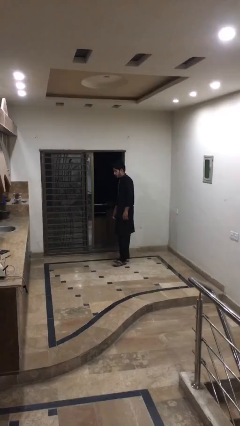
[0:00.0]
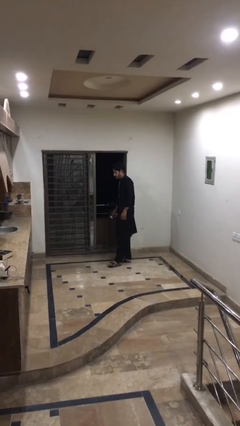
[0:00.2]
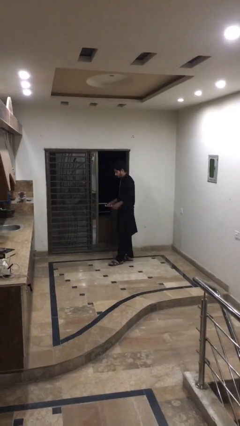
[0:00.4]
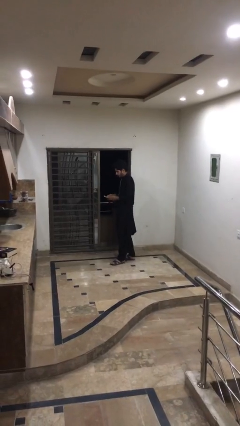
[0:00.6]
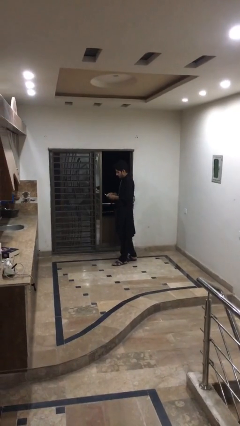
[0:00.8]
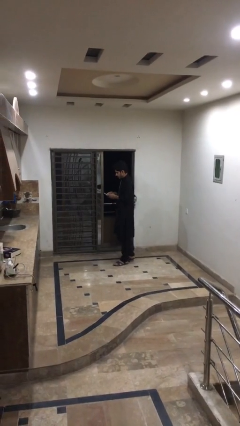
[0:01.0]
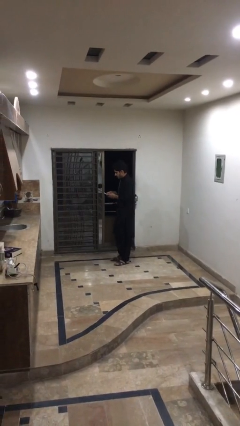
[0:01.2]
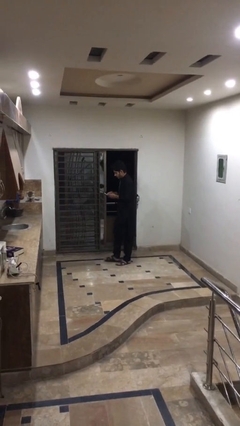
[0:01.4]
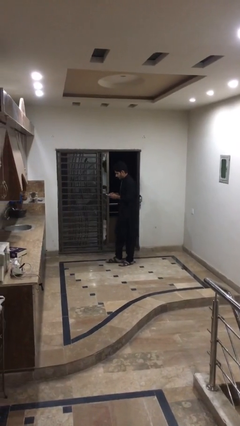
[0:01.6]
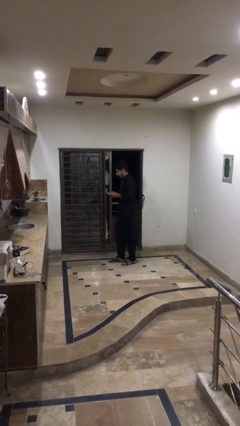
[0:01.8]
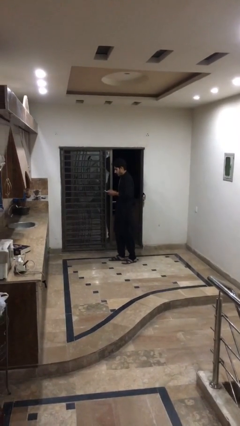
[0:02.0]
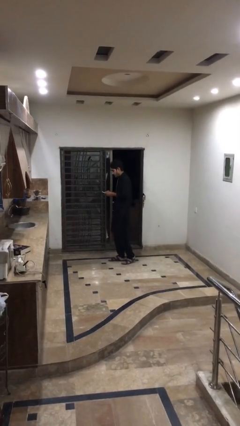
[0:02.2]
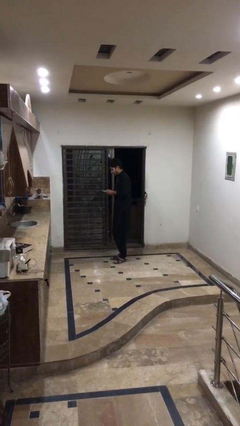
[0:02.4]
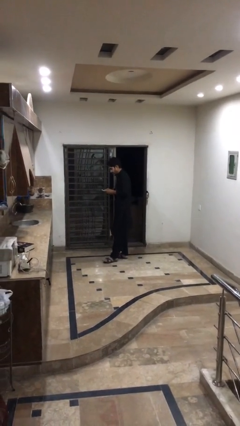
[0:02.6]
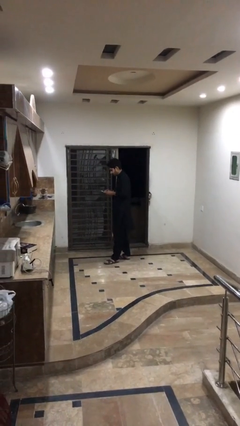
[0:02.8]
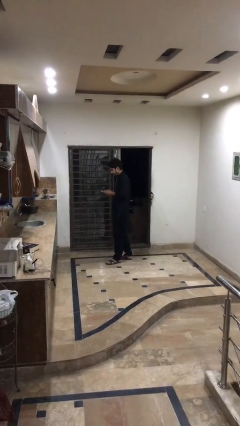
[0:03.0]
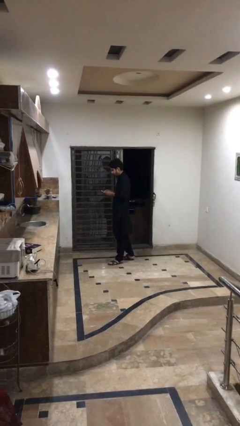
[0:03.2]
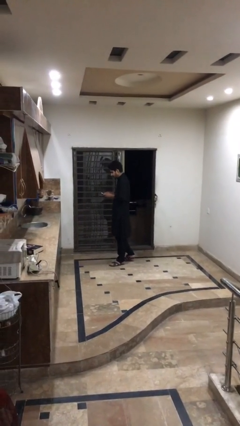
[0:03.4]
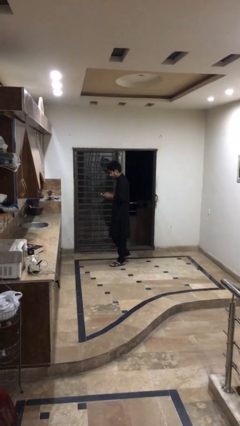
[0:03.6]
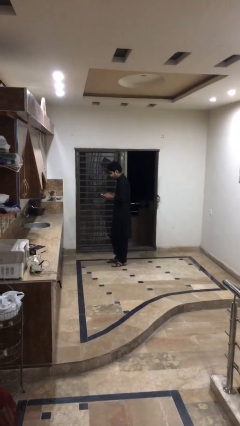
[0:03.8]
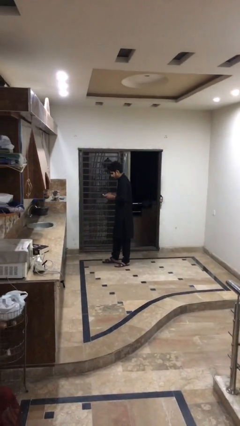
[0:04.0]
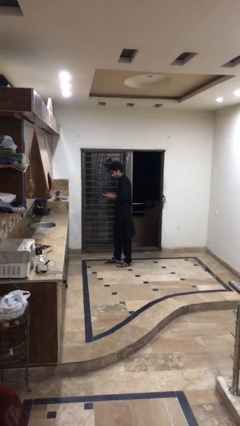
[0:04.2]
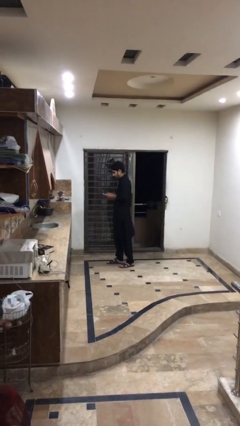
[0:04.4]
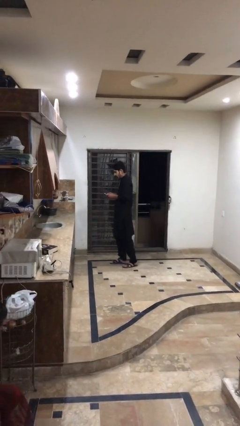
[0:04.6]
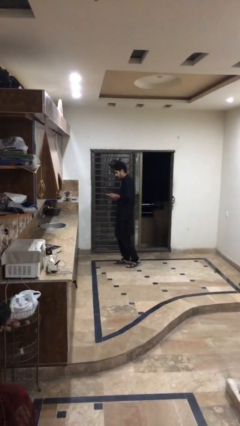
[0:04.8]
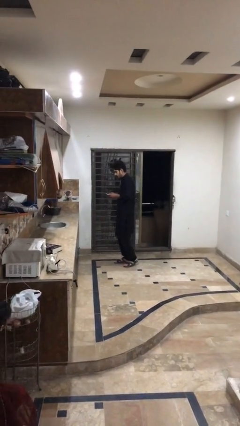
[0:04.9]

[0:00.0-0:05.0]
person texts on phone

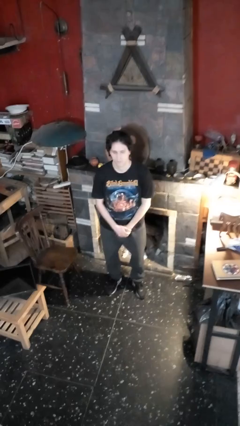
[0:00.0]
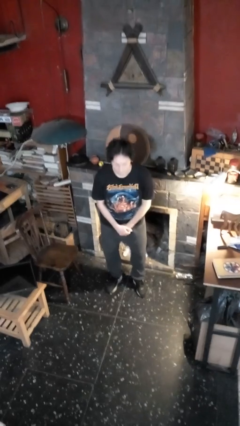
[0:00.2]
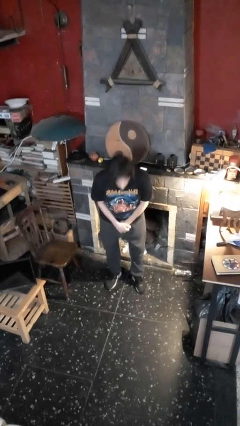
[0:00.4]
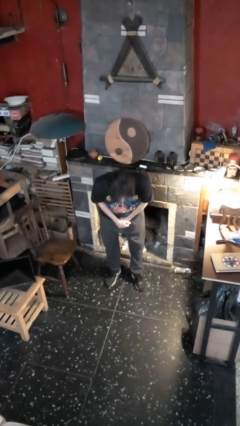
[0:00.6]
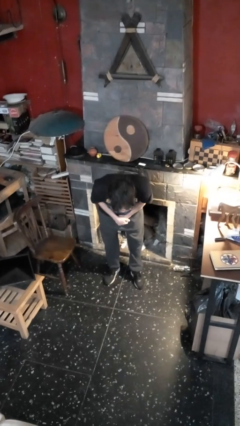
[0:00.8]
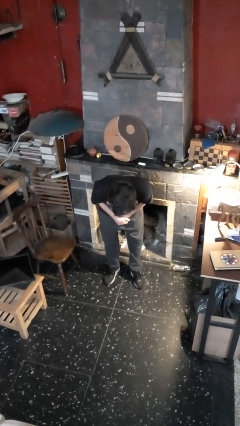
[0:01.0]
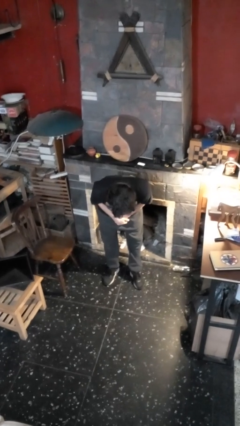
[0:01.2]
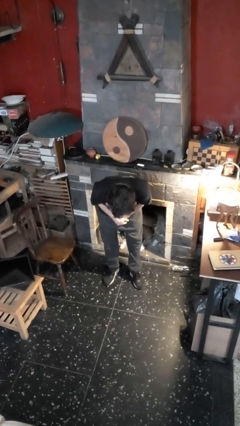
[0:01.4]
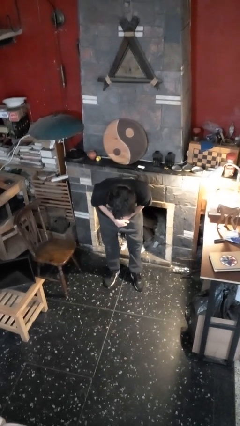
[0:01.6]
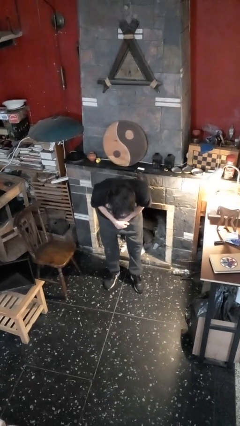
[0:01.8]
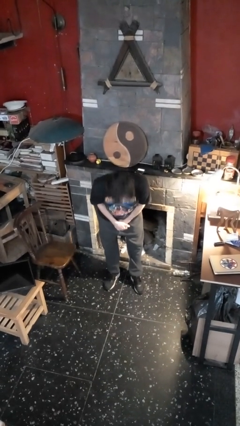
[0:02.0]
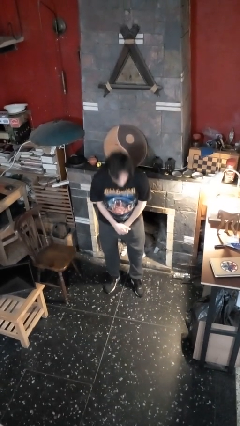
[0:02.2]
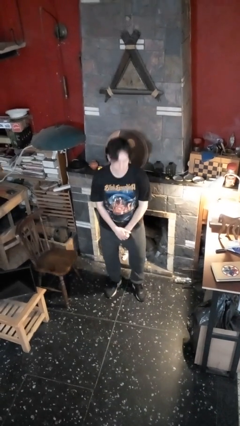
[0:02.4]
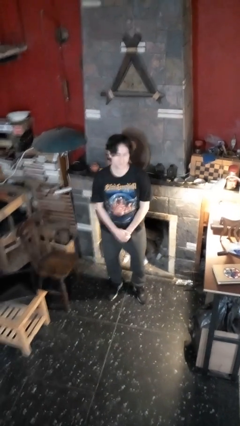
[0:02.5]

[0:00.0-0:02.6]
person bows

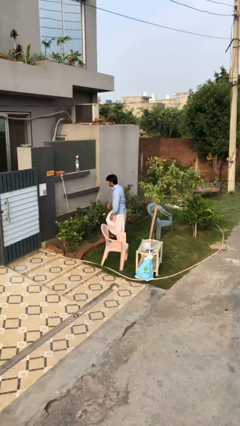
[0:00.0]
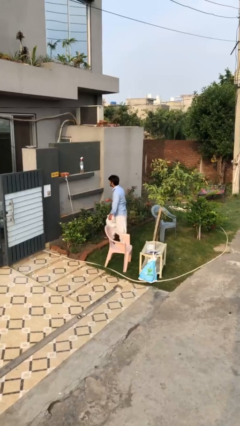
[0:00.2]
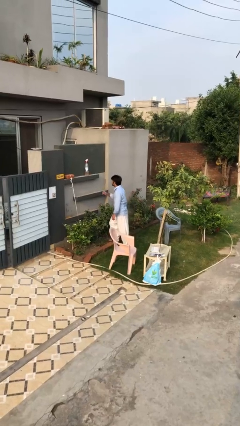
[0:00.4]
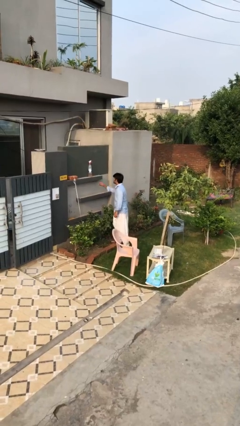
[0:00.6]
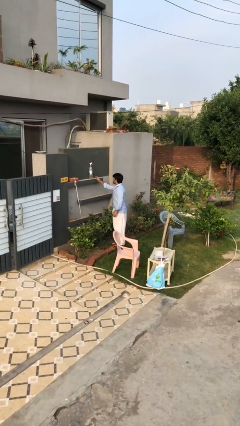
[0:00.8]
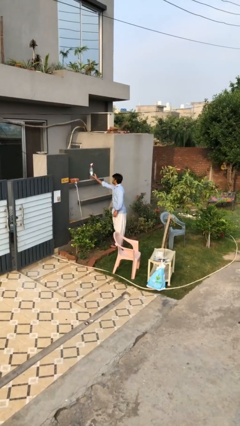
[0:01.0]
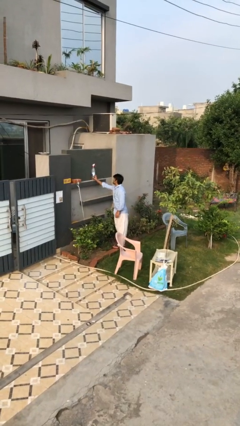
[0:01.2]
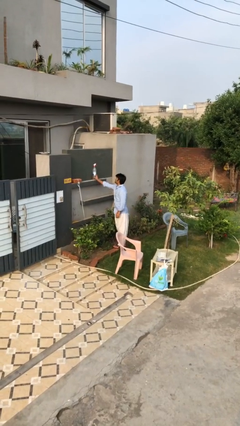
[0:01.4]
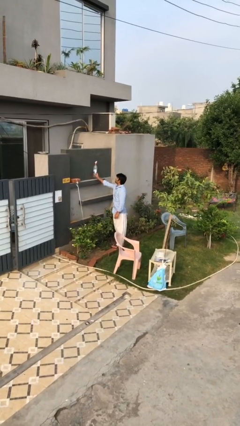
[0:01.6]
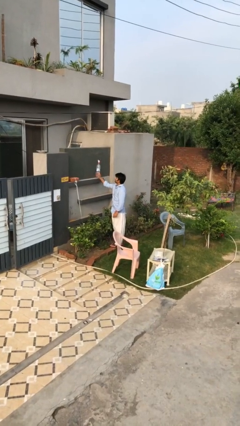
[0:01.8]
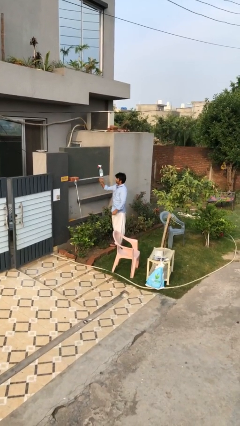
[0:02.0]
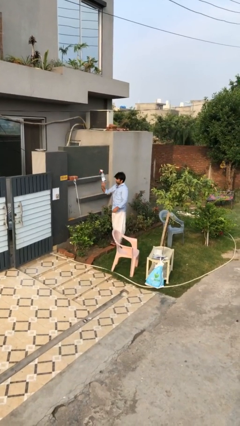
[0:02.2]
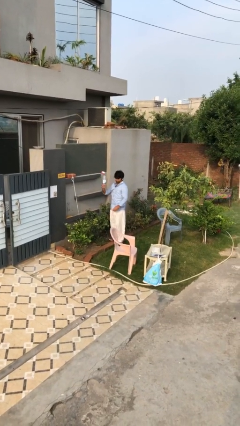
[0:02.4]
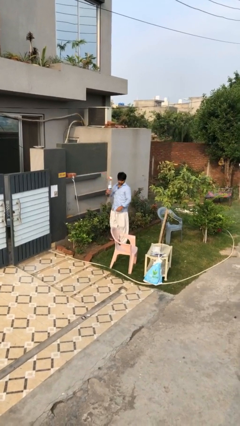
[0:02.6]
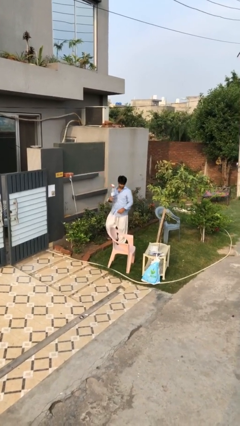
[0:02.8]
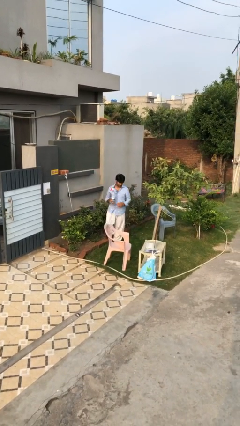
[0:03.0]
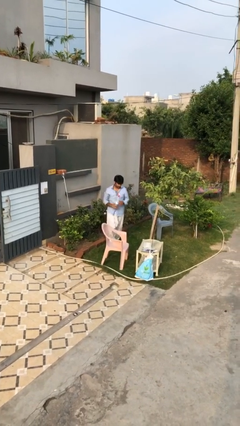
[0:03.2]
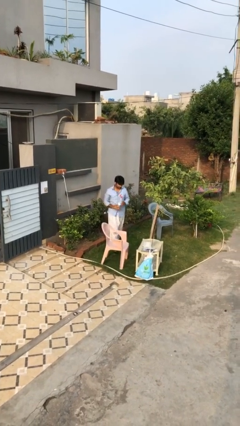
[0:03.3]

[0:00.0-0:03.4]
person picks up object from shelf

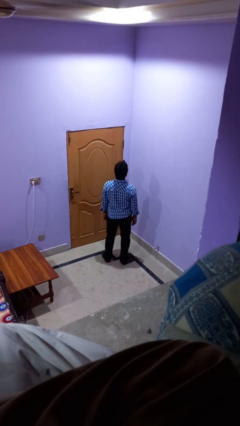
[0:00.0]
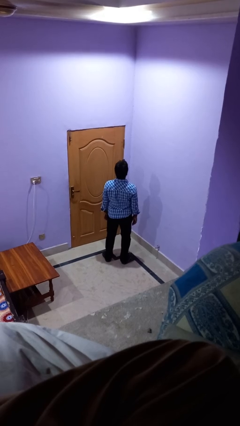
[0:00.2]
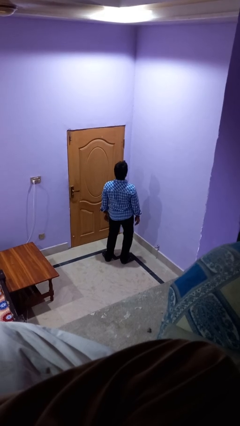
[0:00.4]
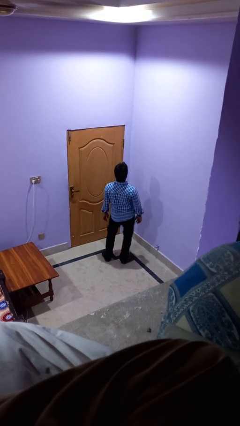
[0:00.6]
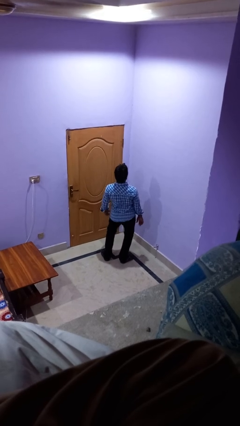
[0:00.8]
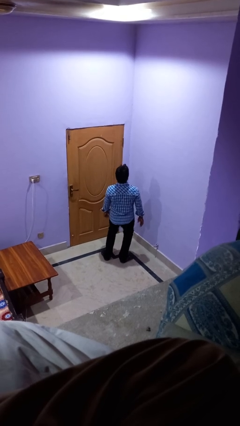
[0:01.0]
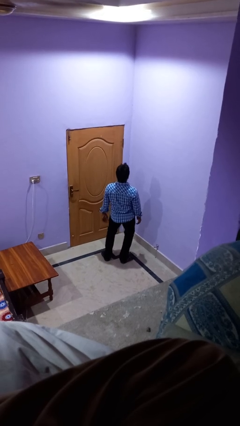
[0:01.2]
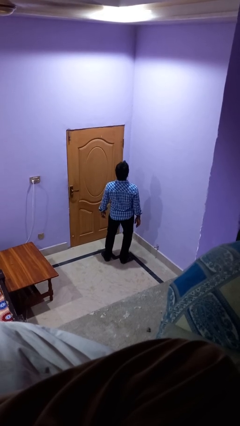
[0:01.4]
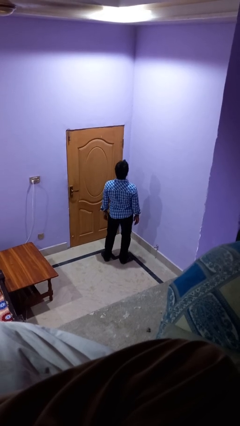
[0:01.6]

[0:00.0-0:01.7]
person wiggles hips

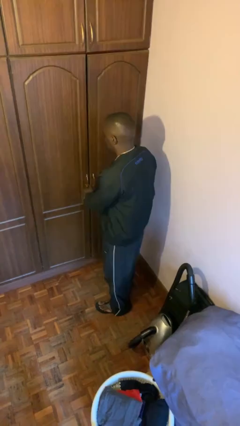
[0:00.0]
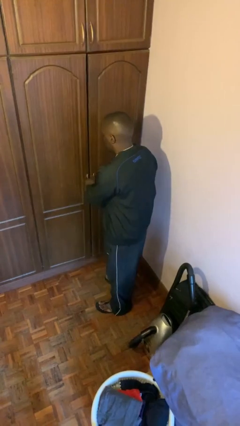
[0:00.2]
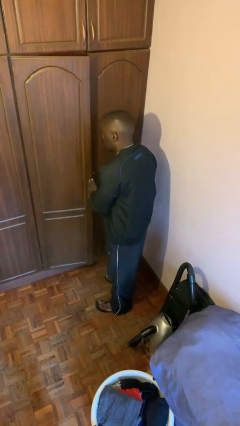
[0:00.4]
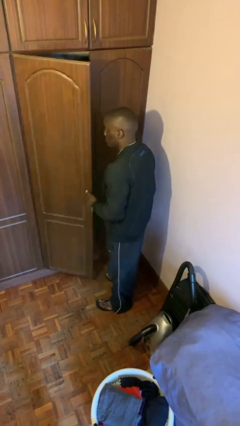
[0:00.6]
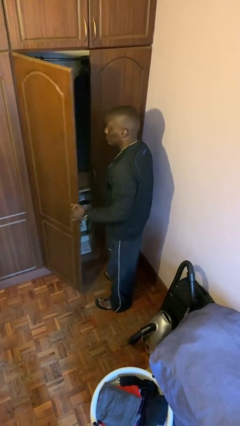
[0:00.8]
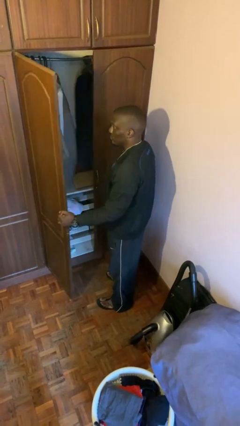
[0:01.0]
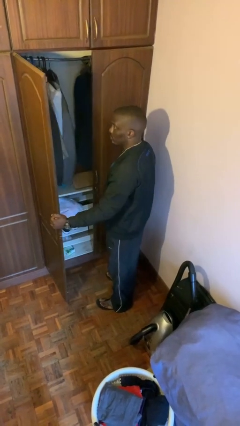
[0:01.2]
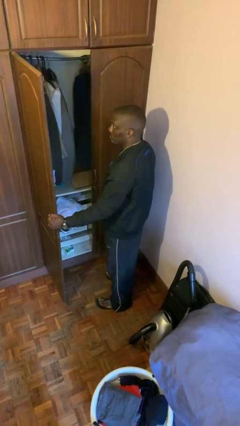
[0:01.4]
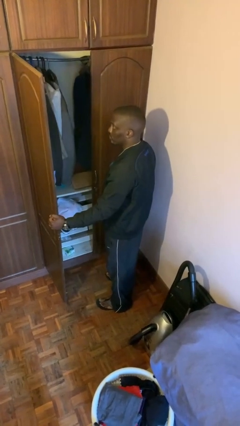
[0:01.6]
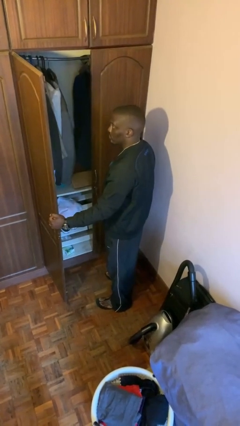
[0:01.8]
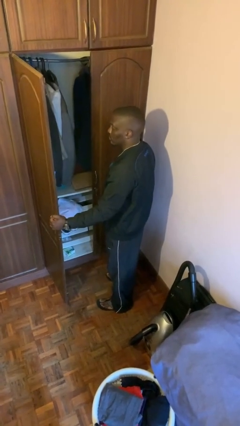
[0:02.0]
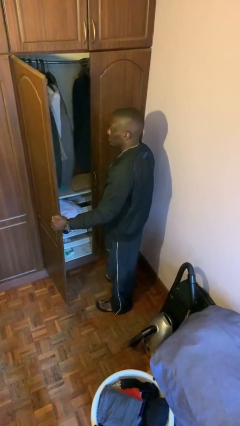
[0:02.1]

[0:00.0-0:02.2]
person opens closet door

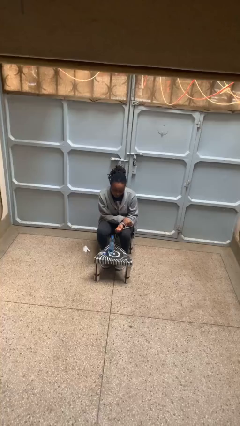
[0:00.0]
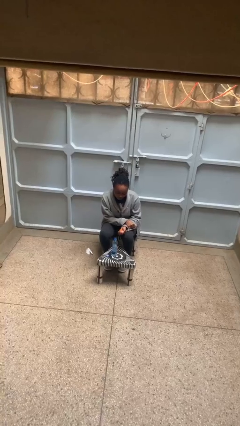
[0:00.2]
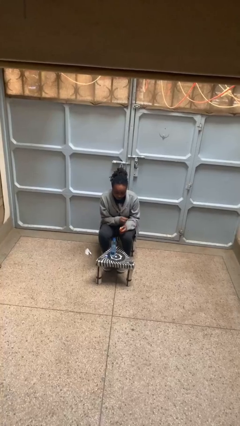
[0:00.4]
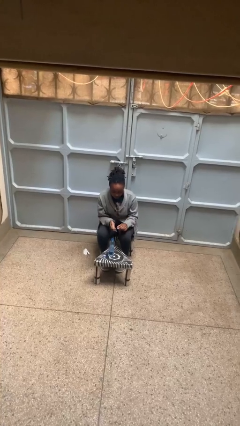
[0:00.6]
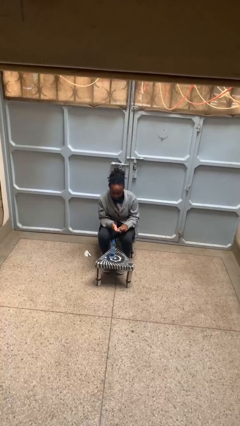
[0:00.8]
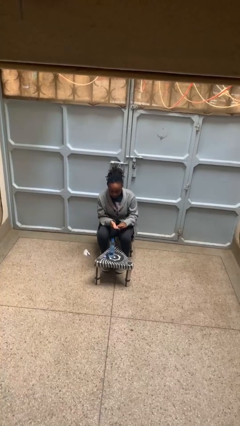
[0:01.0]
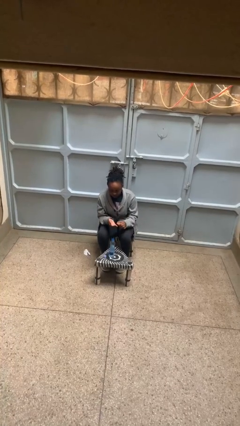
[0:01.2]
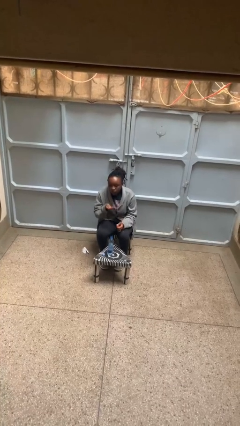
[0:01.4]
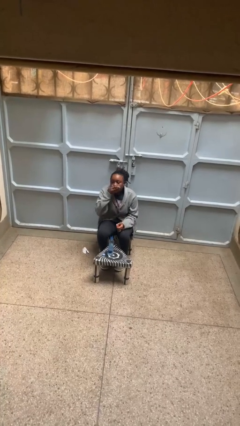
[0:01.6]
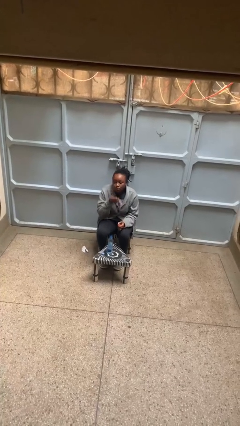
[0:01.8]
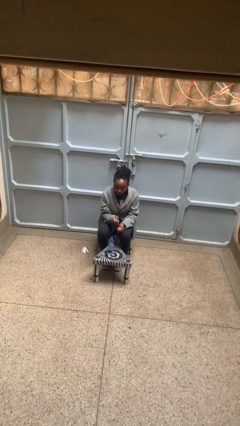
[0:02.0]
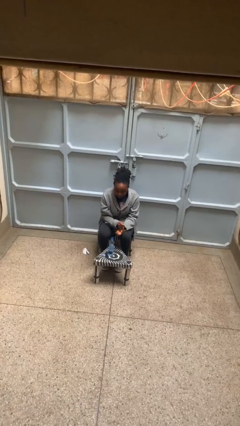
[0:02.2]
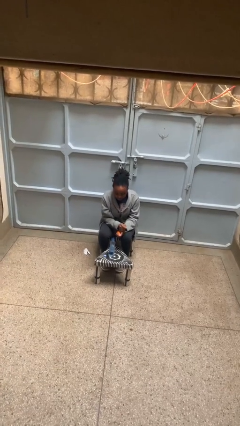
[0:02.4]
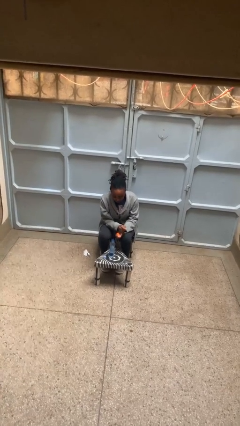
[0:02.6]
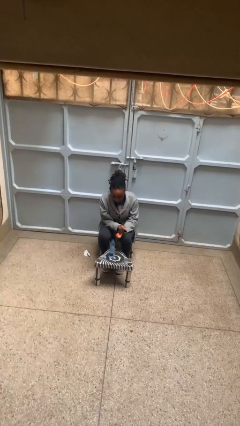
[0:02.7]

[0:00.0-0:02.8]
person takes medicine pills
